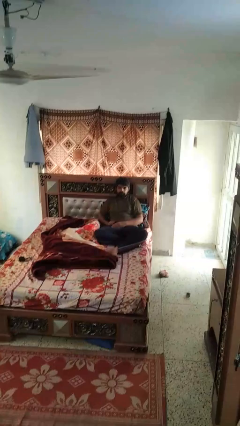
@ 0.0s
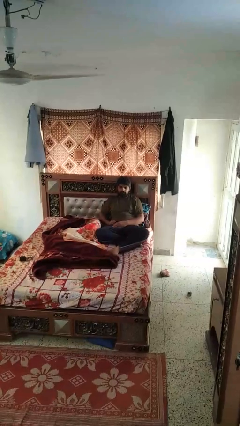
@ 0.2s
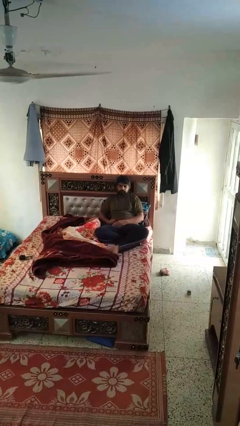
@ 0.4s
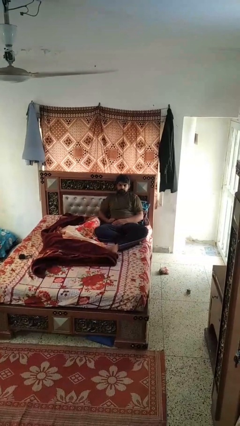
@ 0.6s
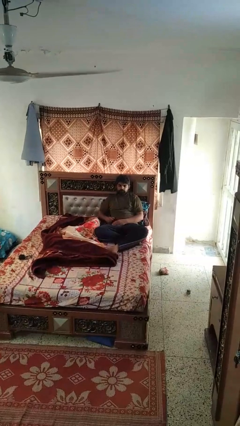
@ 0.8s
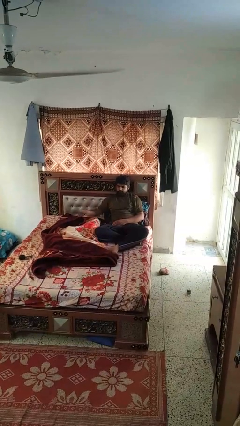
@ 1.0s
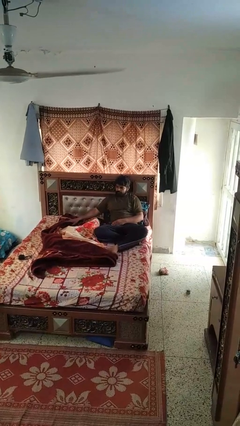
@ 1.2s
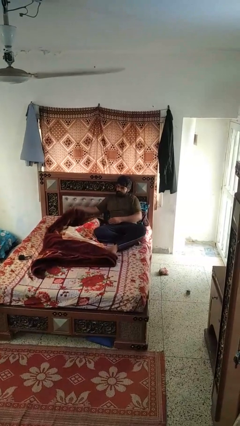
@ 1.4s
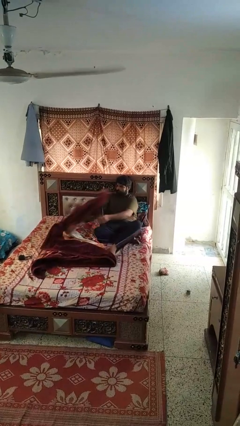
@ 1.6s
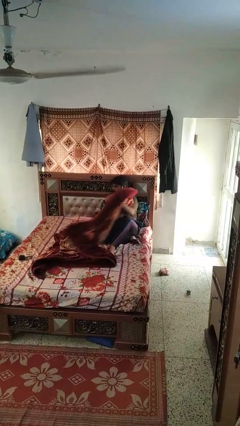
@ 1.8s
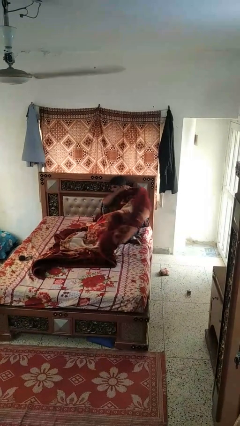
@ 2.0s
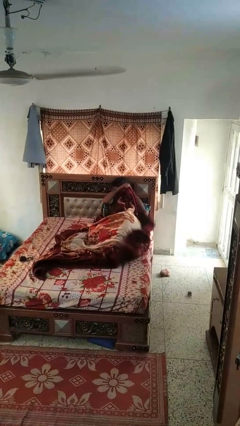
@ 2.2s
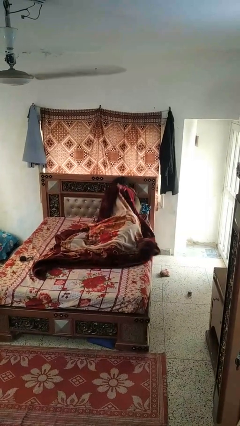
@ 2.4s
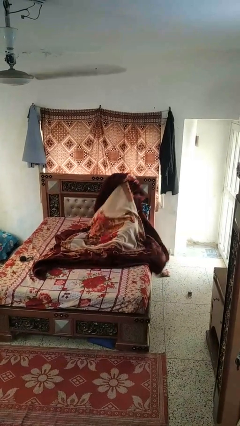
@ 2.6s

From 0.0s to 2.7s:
person covers with blanket

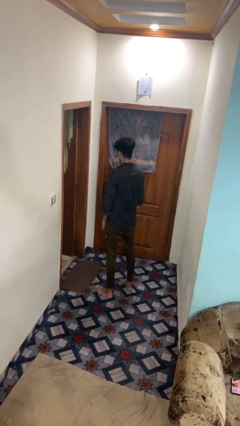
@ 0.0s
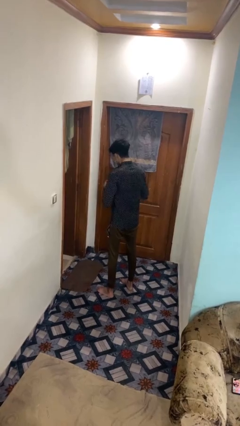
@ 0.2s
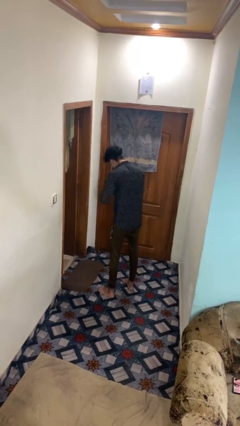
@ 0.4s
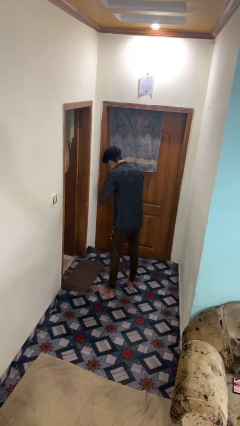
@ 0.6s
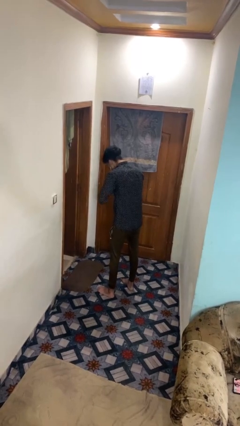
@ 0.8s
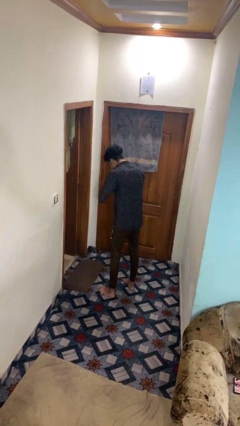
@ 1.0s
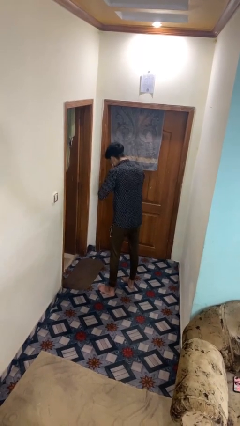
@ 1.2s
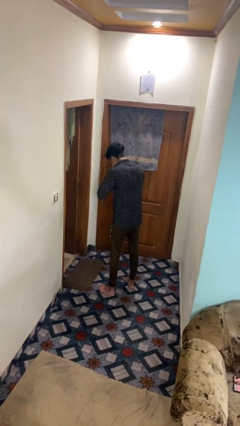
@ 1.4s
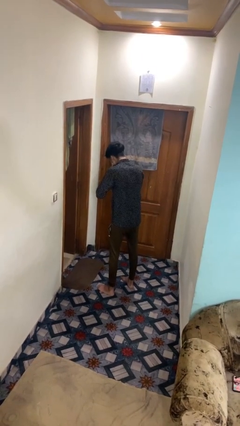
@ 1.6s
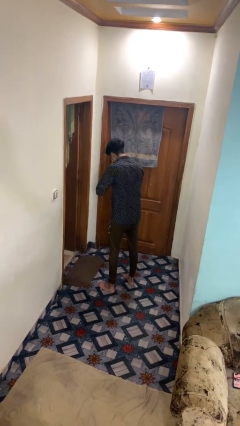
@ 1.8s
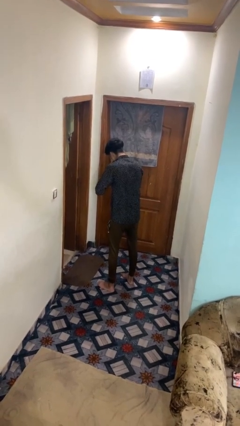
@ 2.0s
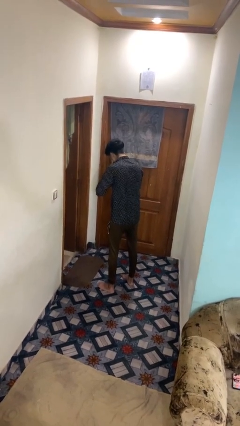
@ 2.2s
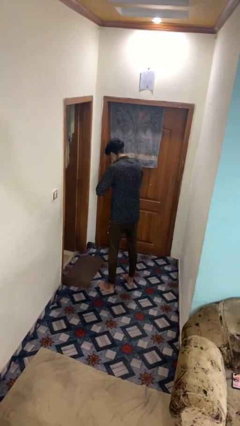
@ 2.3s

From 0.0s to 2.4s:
person sneezes into hand

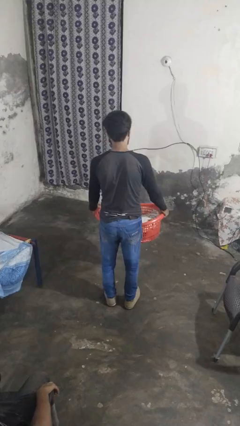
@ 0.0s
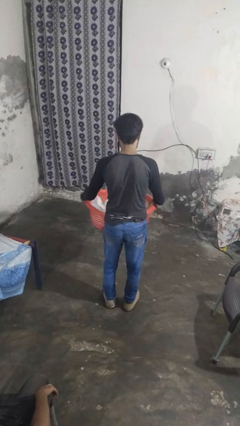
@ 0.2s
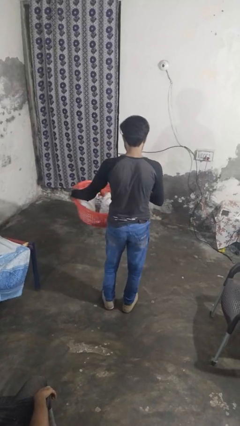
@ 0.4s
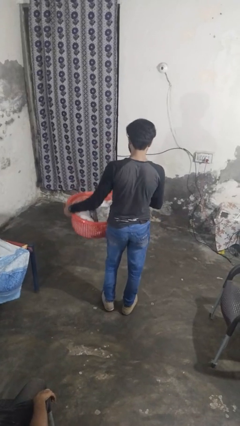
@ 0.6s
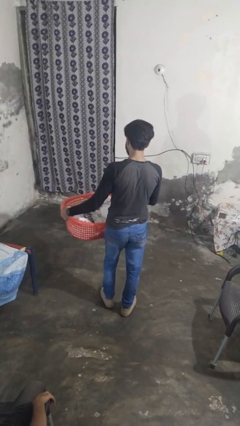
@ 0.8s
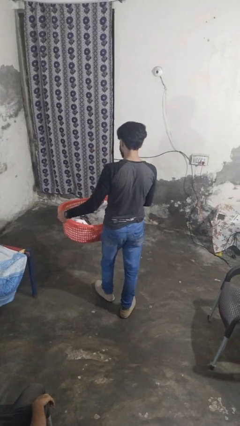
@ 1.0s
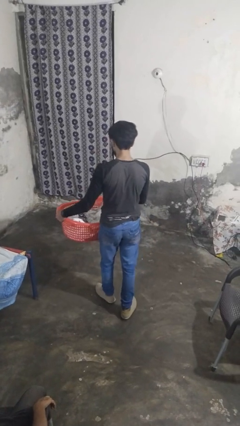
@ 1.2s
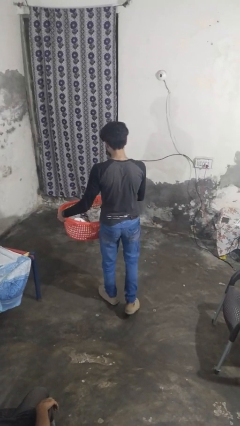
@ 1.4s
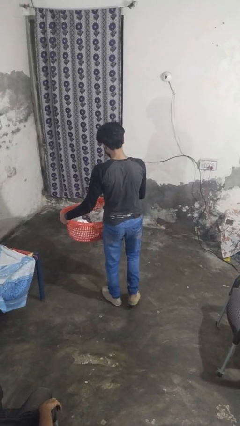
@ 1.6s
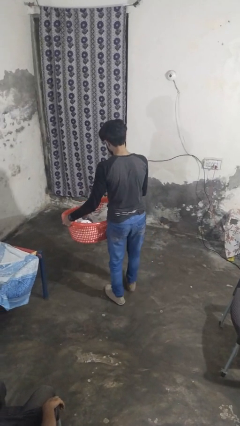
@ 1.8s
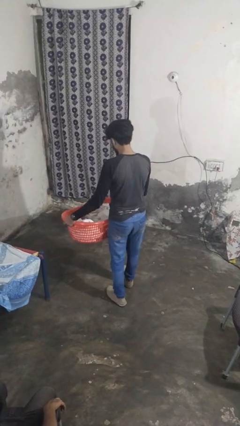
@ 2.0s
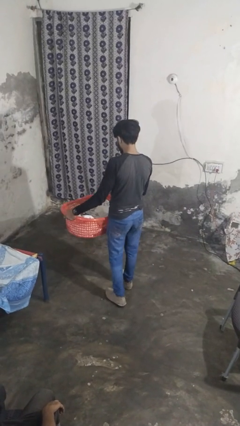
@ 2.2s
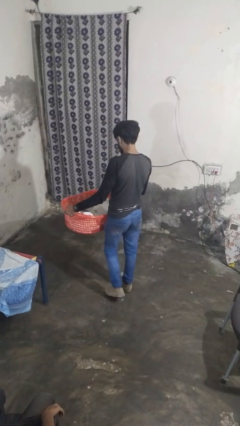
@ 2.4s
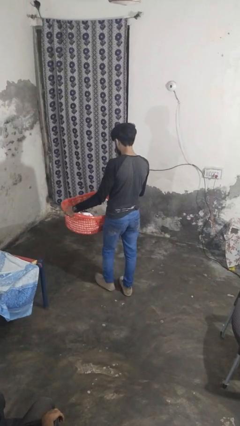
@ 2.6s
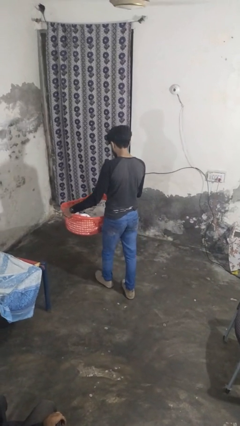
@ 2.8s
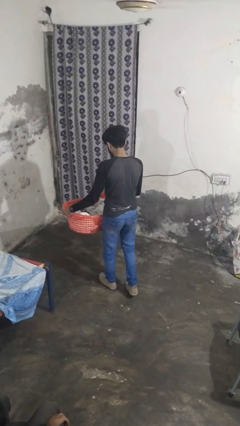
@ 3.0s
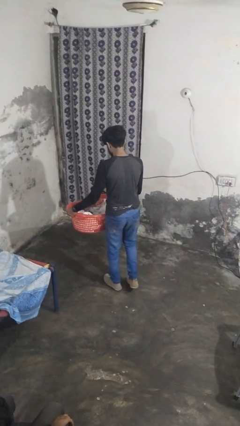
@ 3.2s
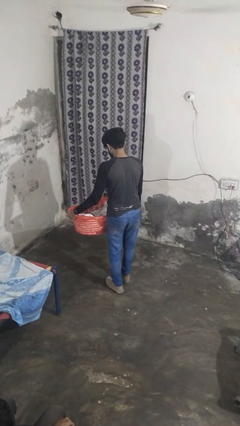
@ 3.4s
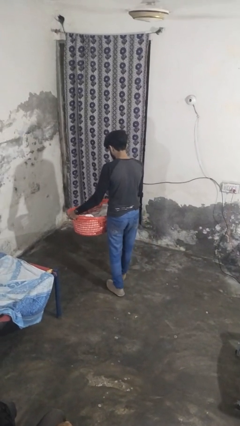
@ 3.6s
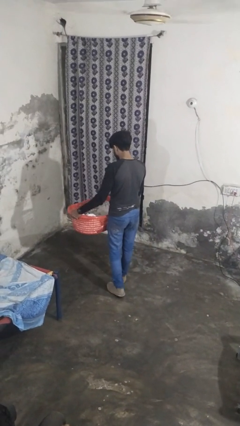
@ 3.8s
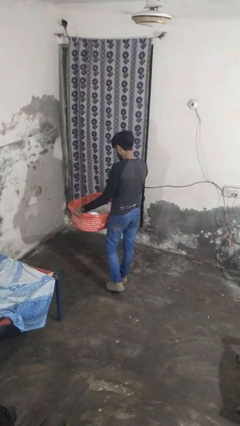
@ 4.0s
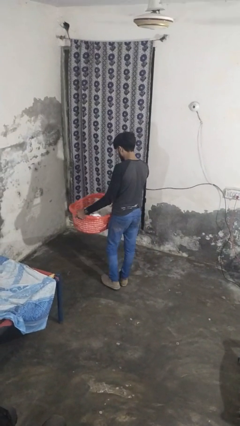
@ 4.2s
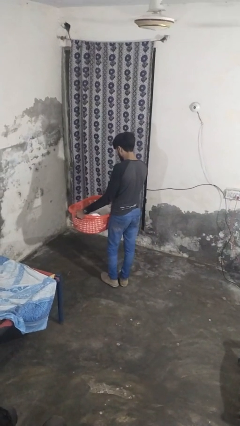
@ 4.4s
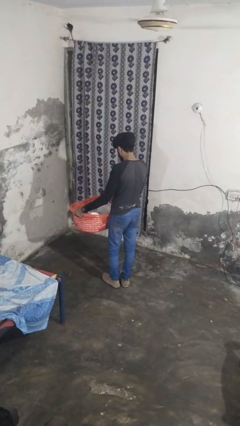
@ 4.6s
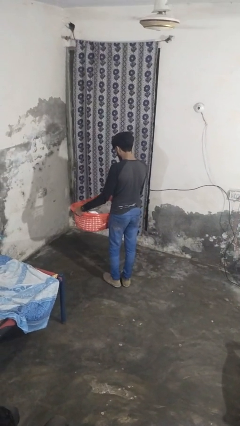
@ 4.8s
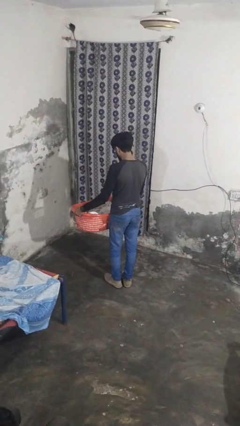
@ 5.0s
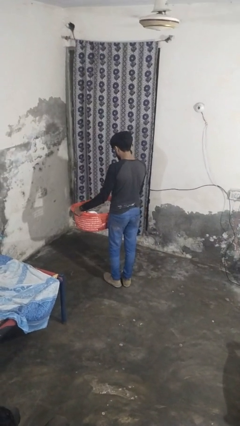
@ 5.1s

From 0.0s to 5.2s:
person carries laundry basket

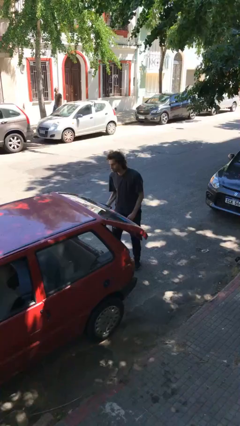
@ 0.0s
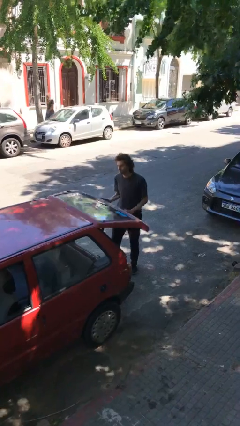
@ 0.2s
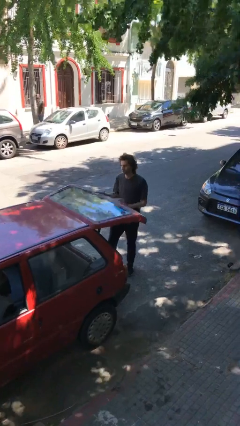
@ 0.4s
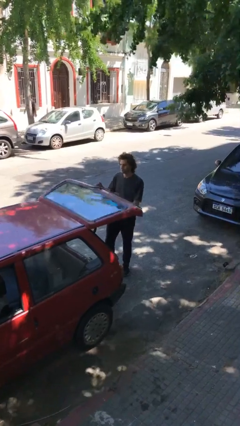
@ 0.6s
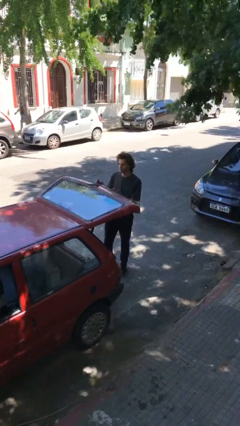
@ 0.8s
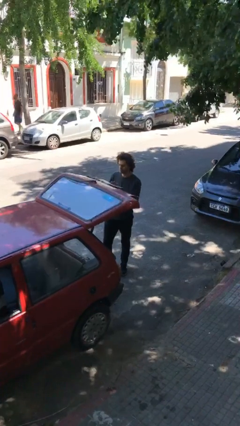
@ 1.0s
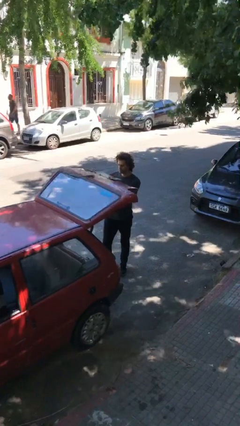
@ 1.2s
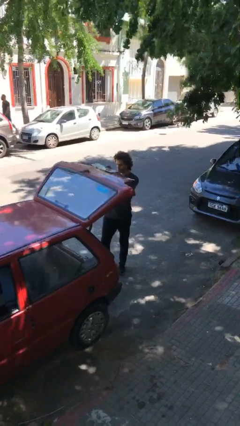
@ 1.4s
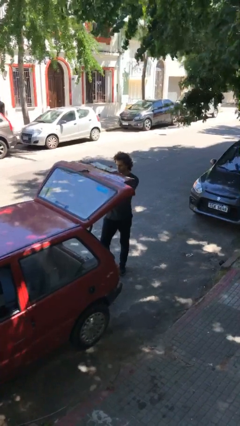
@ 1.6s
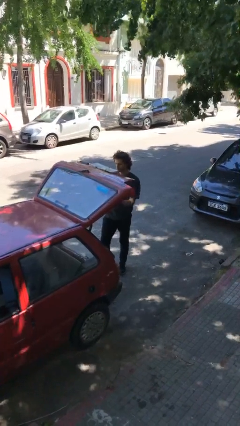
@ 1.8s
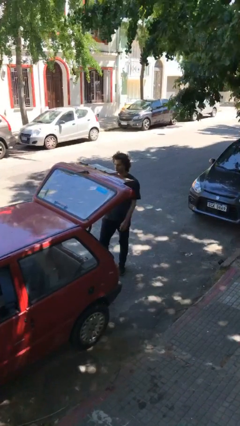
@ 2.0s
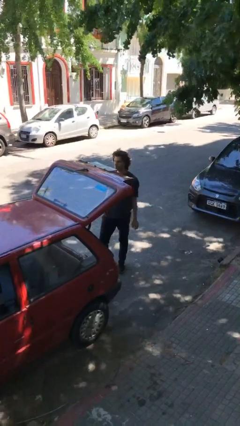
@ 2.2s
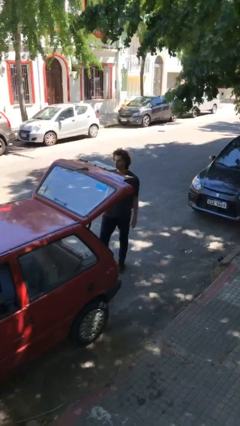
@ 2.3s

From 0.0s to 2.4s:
person opens car trunk

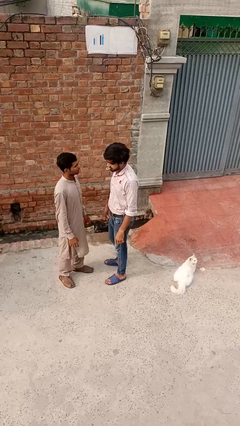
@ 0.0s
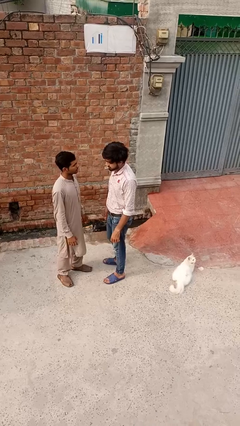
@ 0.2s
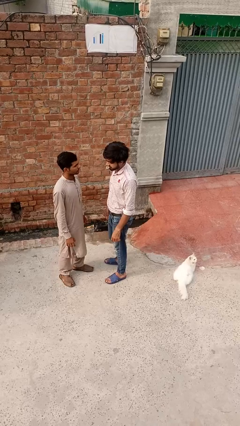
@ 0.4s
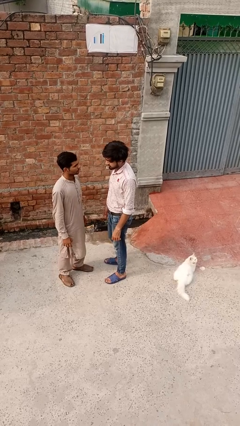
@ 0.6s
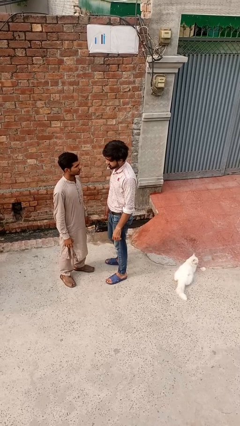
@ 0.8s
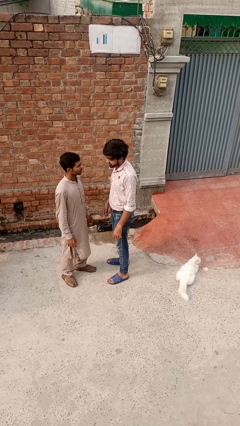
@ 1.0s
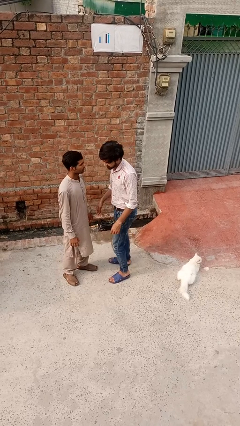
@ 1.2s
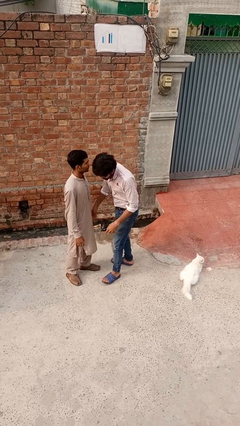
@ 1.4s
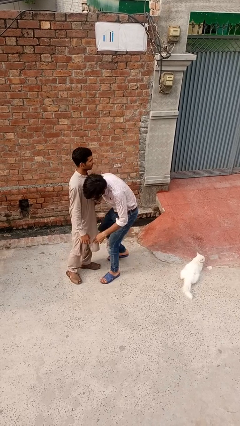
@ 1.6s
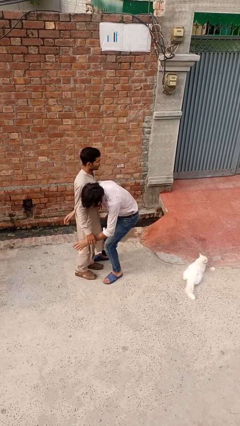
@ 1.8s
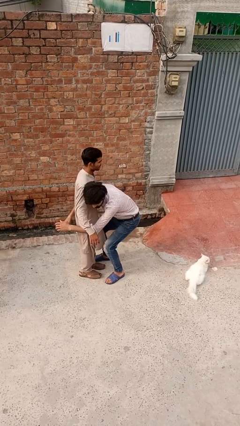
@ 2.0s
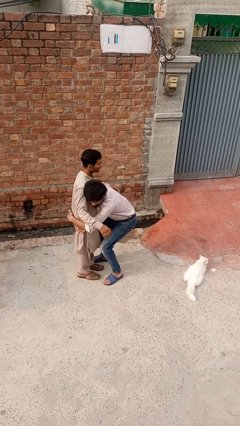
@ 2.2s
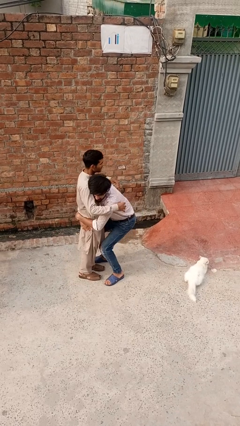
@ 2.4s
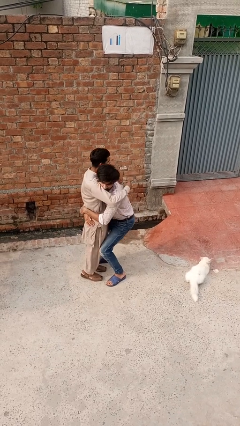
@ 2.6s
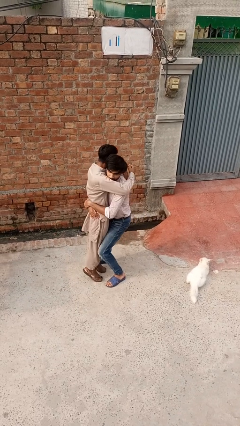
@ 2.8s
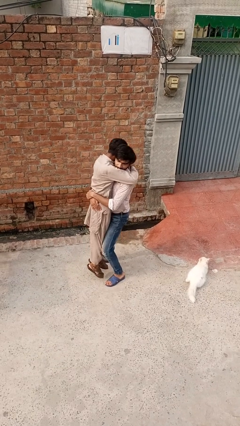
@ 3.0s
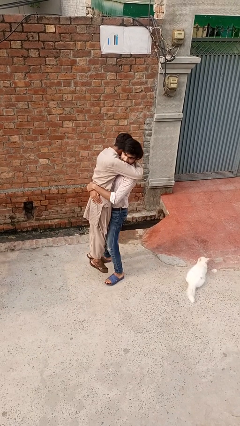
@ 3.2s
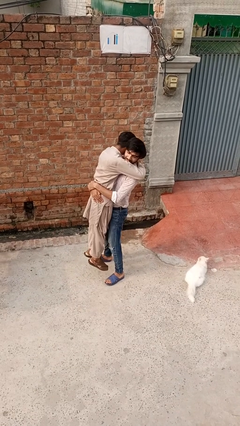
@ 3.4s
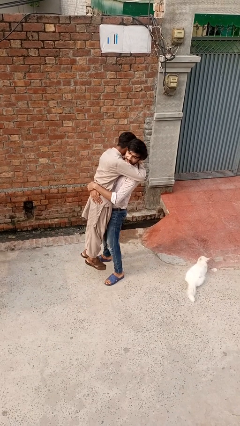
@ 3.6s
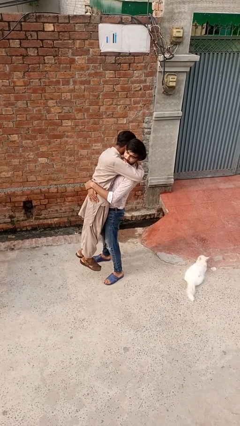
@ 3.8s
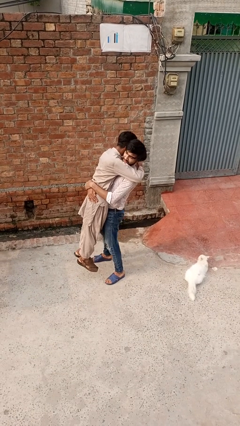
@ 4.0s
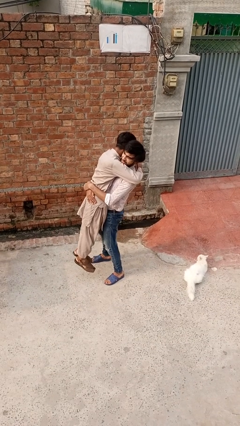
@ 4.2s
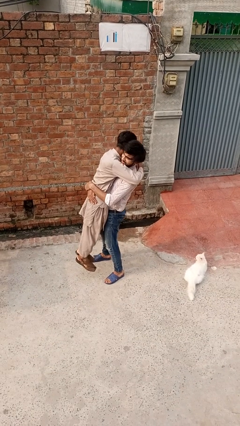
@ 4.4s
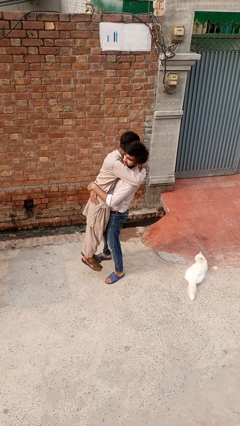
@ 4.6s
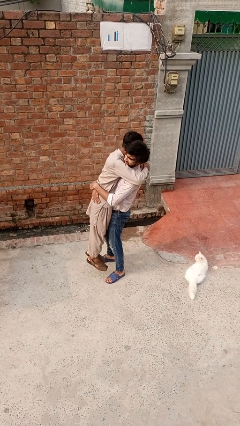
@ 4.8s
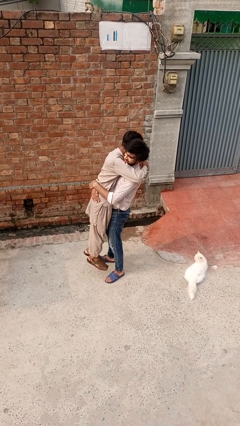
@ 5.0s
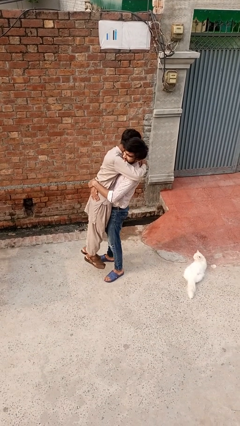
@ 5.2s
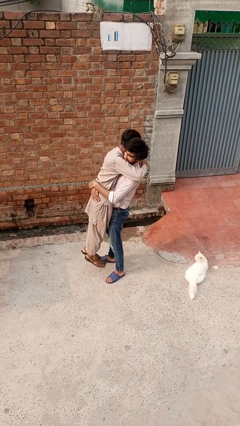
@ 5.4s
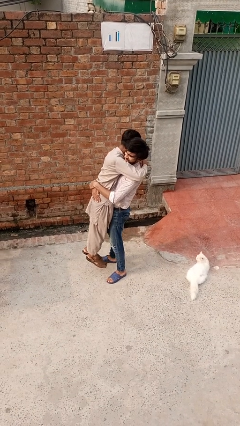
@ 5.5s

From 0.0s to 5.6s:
person picks up person
